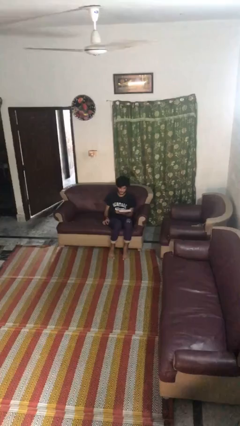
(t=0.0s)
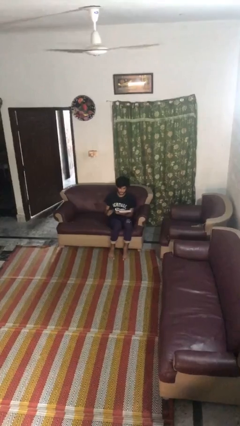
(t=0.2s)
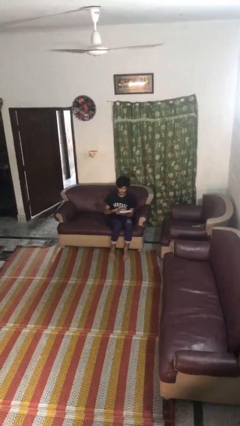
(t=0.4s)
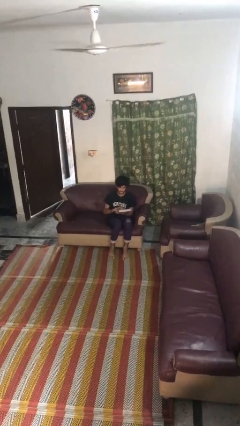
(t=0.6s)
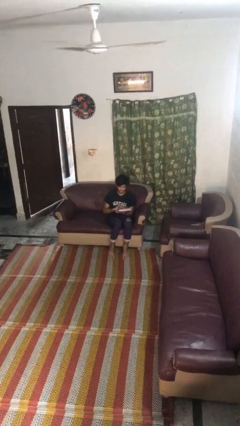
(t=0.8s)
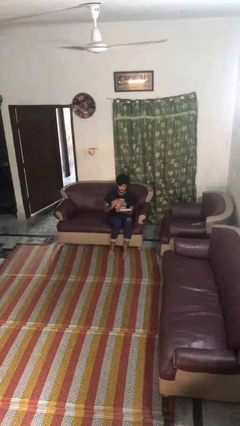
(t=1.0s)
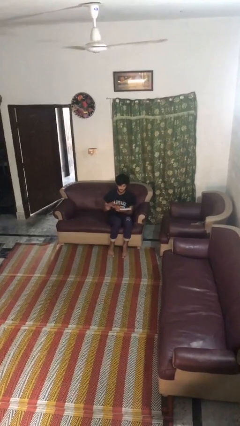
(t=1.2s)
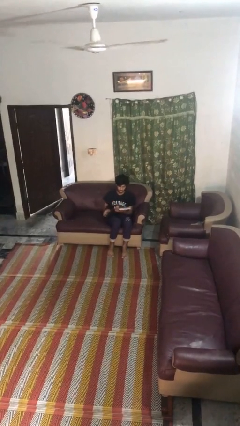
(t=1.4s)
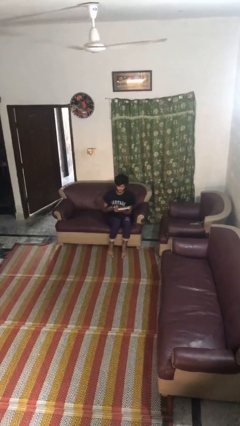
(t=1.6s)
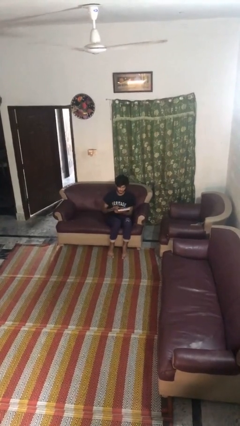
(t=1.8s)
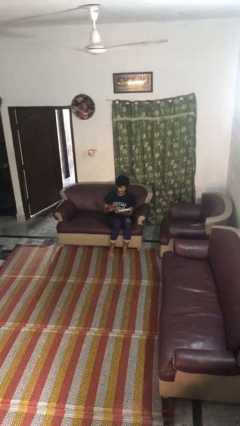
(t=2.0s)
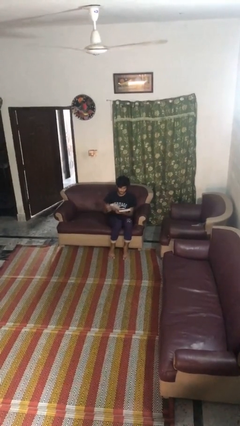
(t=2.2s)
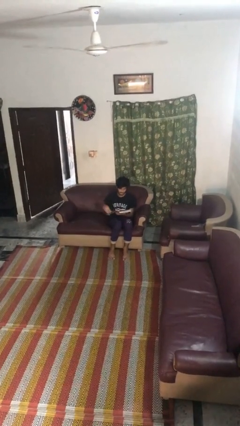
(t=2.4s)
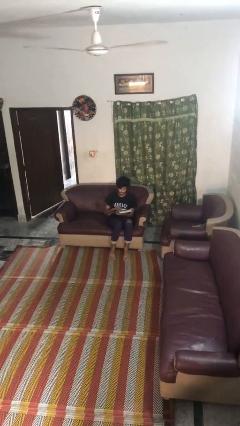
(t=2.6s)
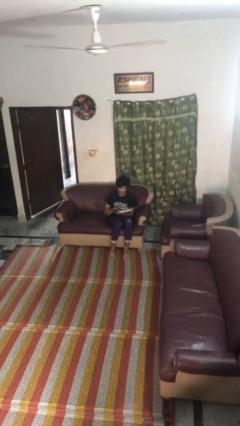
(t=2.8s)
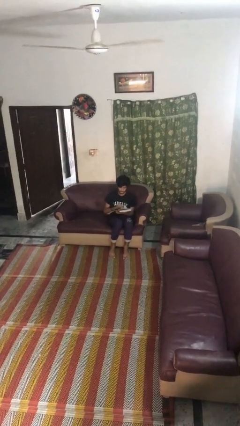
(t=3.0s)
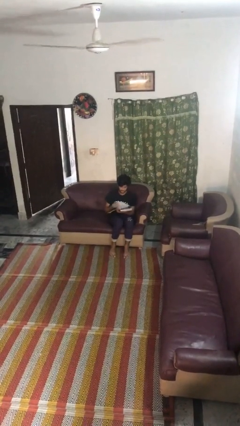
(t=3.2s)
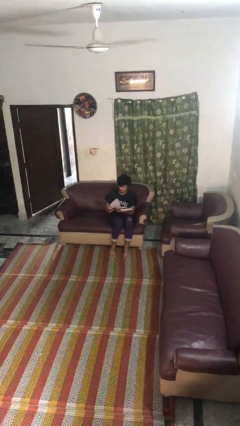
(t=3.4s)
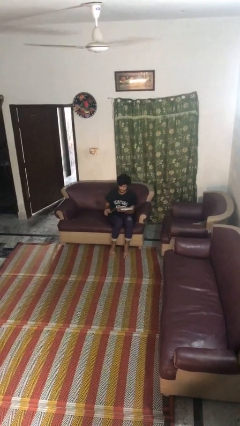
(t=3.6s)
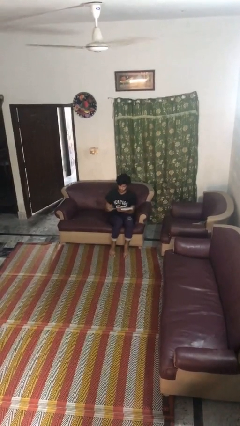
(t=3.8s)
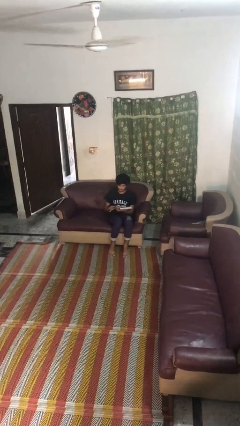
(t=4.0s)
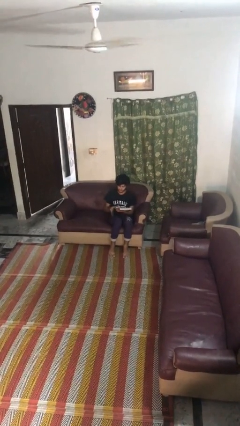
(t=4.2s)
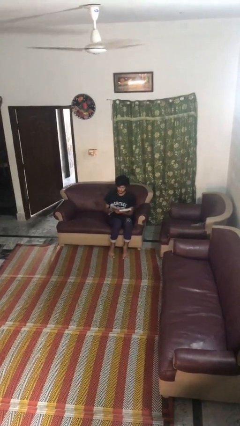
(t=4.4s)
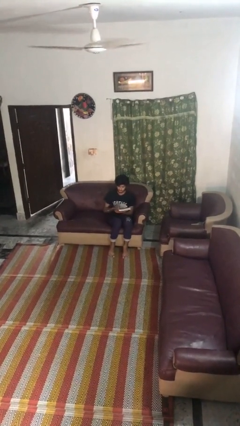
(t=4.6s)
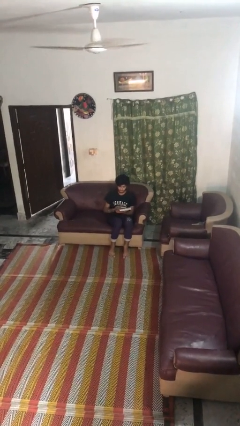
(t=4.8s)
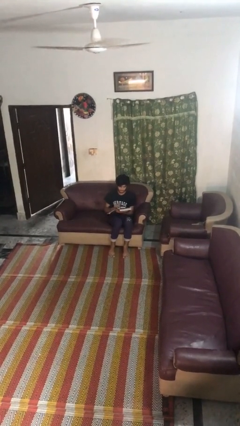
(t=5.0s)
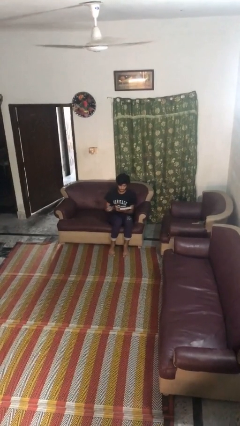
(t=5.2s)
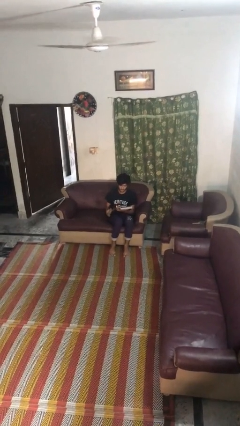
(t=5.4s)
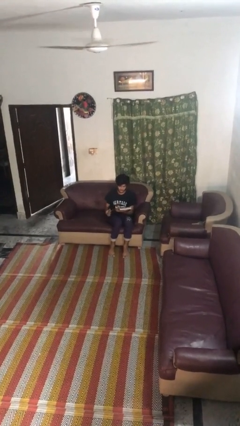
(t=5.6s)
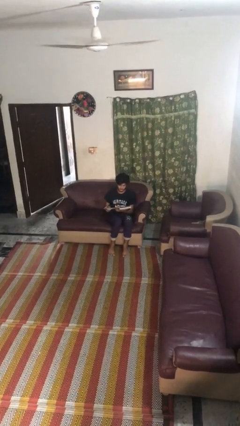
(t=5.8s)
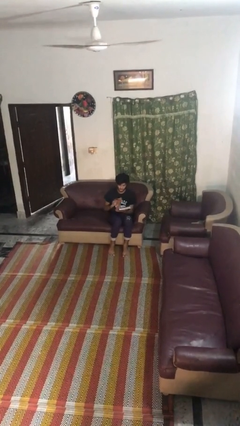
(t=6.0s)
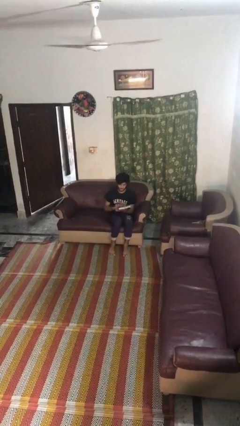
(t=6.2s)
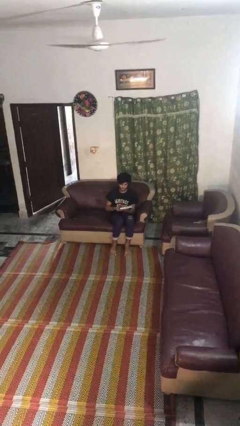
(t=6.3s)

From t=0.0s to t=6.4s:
person reads book

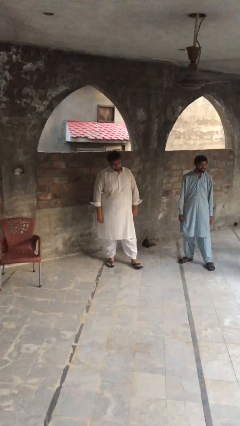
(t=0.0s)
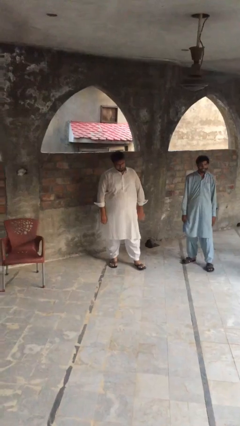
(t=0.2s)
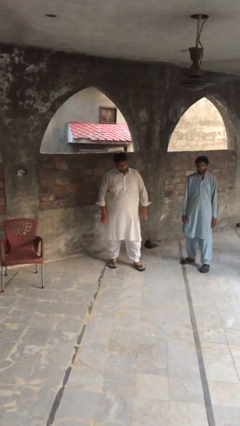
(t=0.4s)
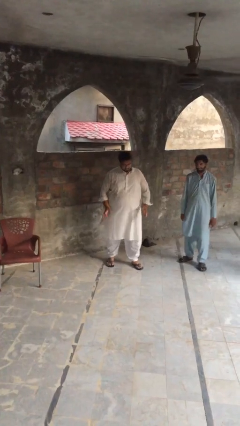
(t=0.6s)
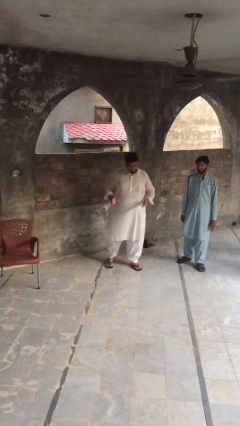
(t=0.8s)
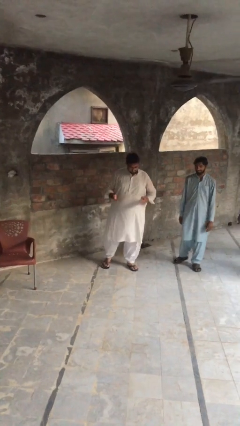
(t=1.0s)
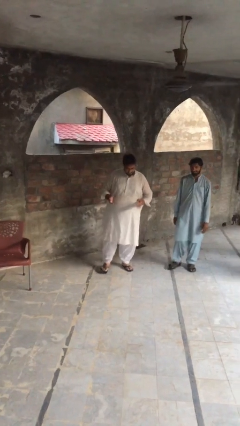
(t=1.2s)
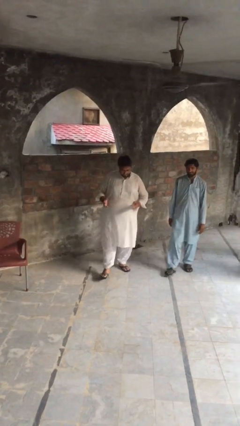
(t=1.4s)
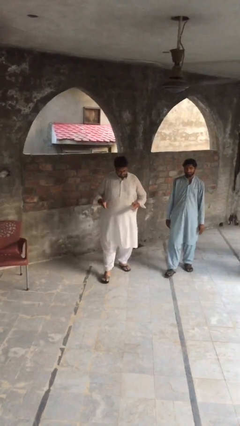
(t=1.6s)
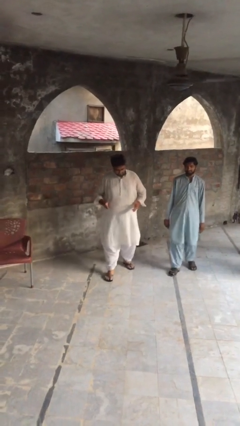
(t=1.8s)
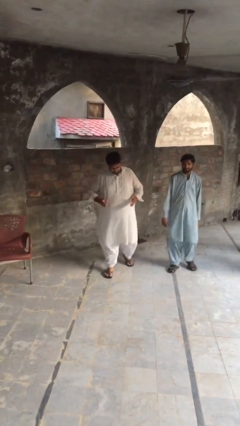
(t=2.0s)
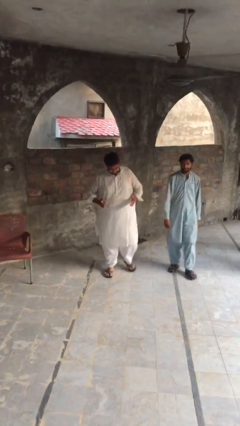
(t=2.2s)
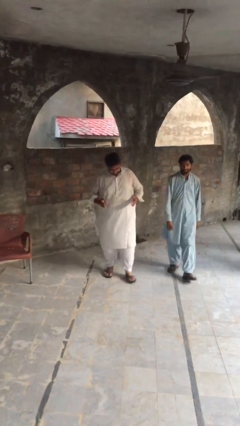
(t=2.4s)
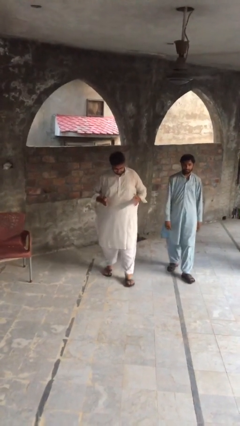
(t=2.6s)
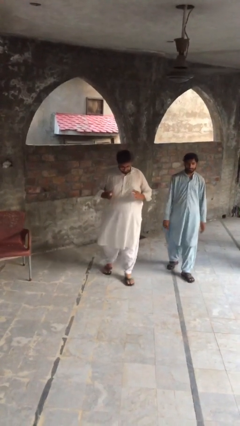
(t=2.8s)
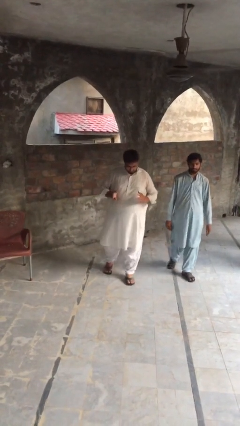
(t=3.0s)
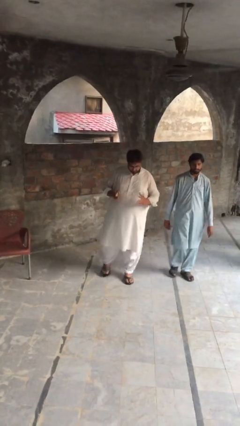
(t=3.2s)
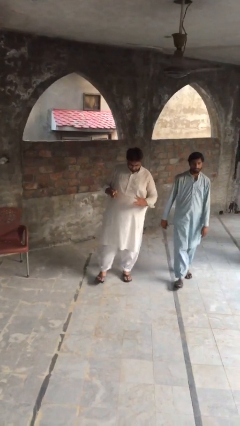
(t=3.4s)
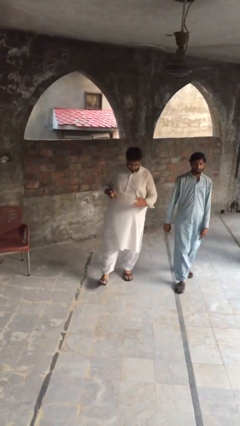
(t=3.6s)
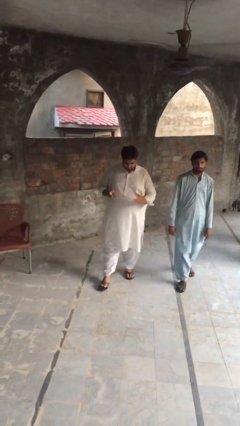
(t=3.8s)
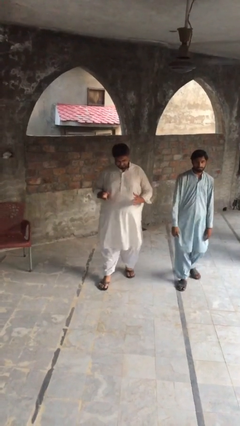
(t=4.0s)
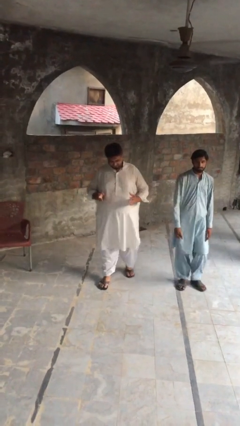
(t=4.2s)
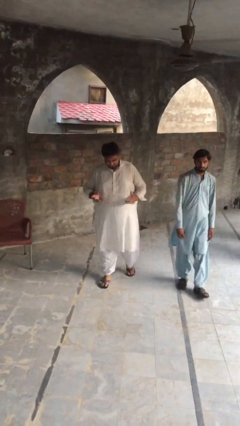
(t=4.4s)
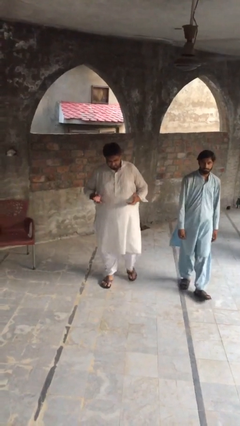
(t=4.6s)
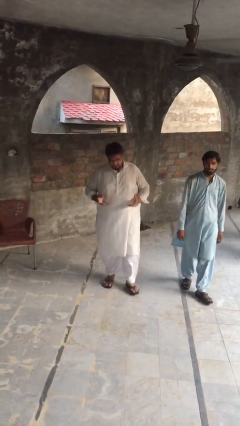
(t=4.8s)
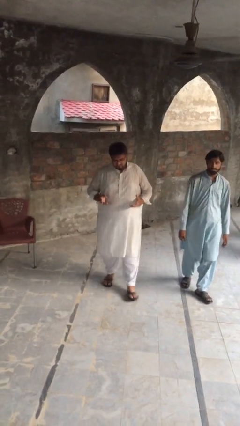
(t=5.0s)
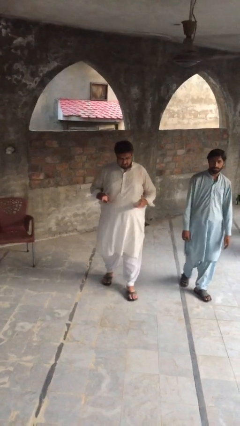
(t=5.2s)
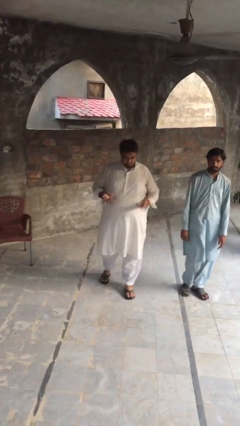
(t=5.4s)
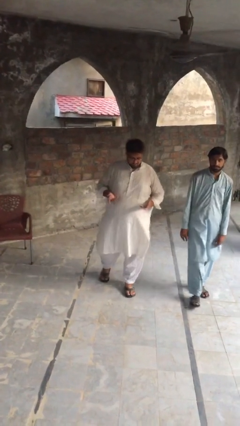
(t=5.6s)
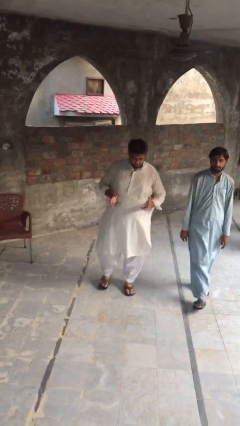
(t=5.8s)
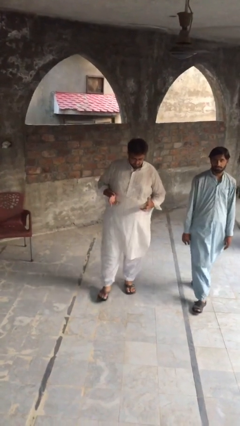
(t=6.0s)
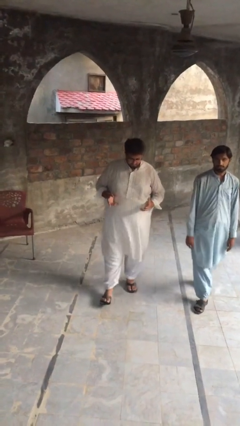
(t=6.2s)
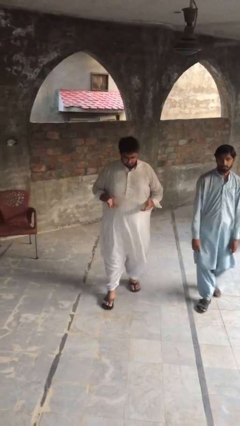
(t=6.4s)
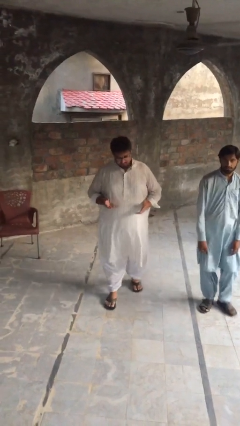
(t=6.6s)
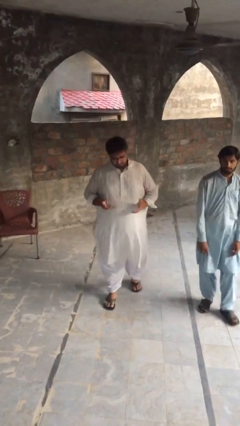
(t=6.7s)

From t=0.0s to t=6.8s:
person talks to person

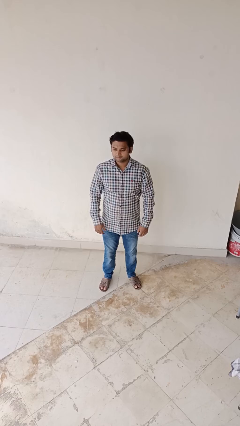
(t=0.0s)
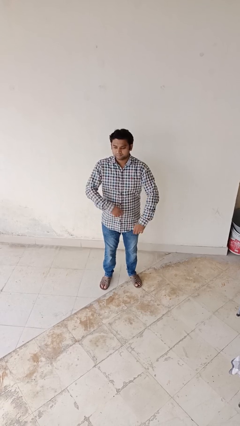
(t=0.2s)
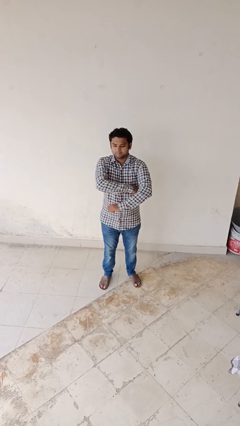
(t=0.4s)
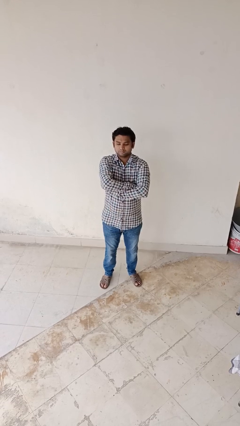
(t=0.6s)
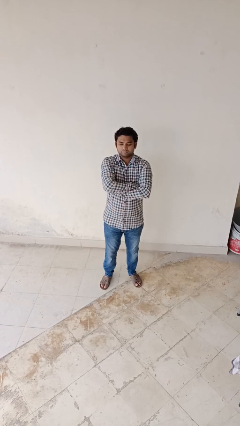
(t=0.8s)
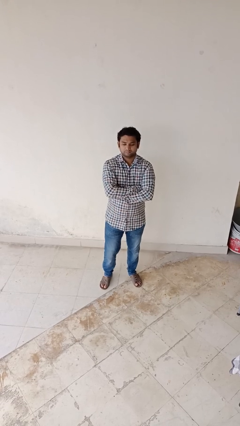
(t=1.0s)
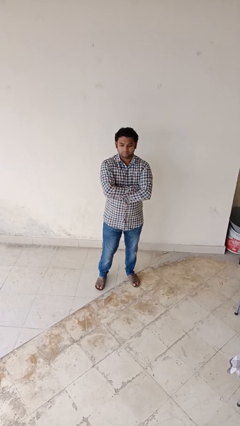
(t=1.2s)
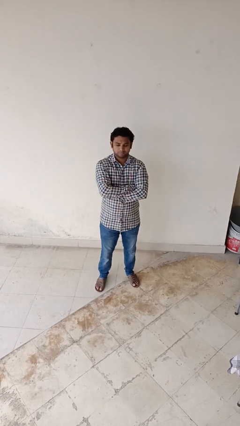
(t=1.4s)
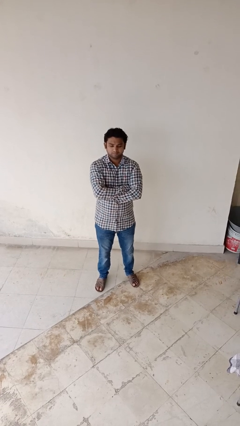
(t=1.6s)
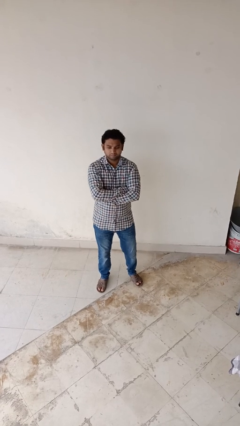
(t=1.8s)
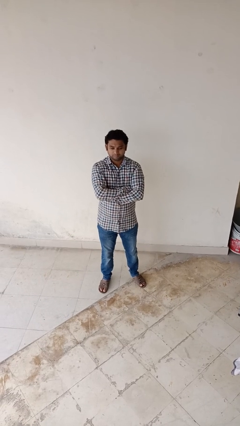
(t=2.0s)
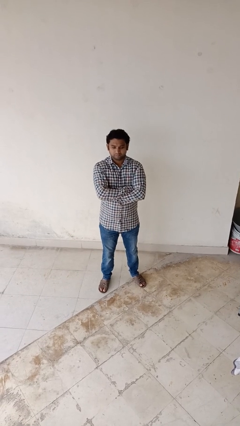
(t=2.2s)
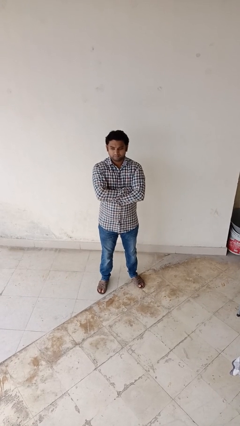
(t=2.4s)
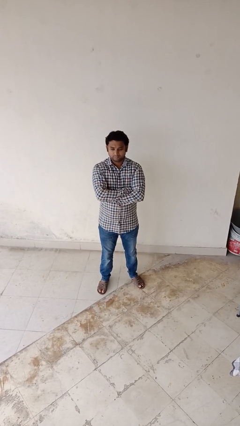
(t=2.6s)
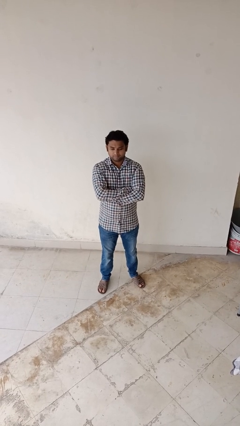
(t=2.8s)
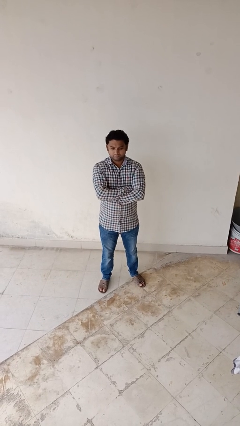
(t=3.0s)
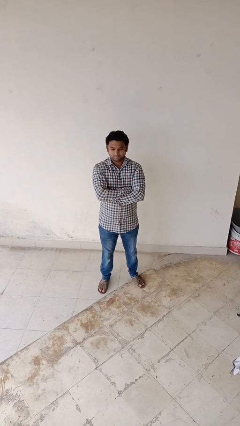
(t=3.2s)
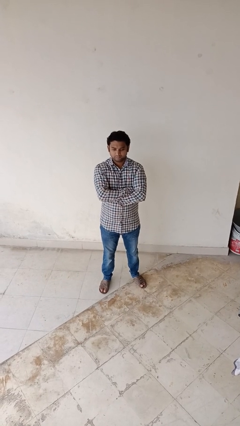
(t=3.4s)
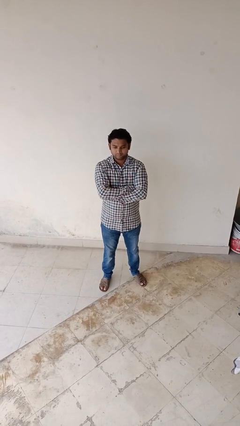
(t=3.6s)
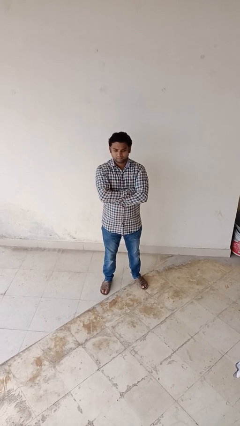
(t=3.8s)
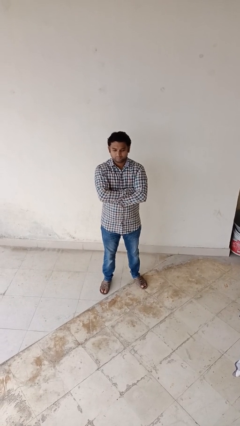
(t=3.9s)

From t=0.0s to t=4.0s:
person gestures arms x

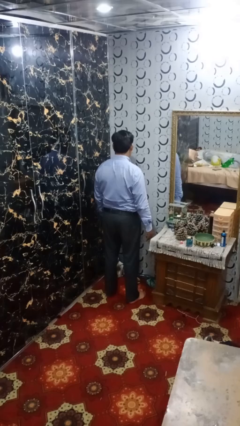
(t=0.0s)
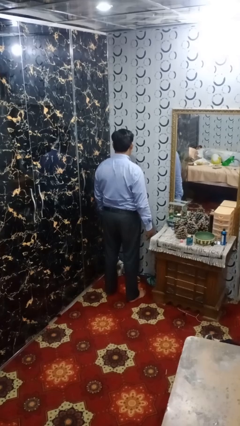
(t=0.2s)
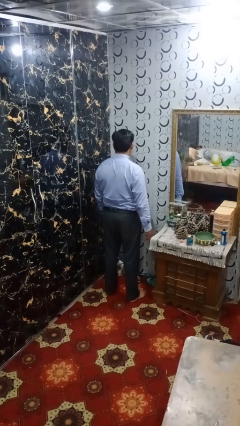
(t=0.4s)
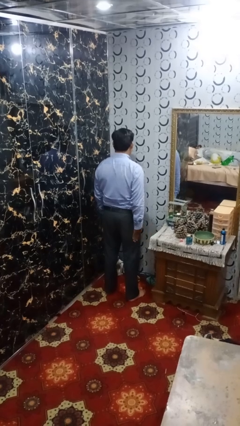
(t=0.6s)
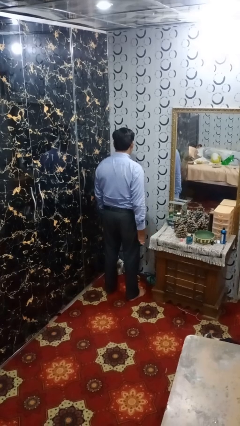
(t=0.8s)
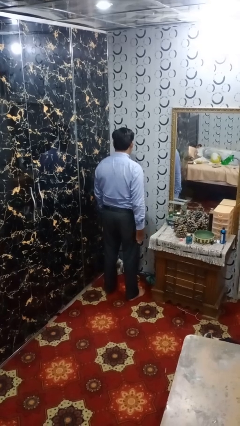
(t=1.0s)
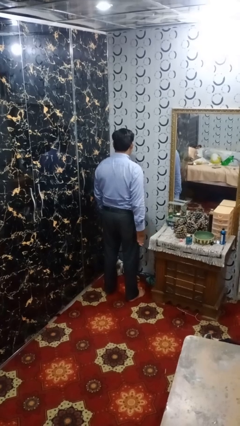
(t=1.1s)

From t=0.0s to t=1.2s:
person slaps hands on thighs
